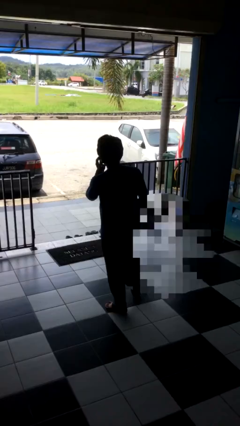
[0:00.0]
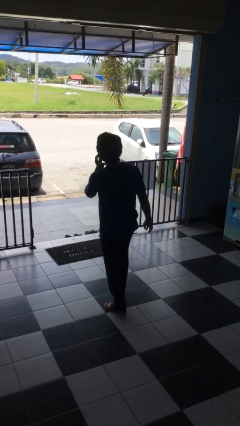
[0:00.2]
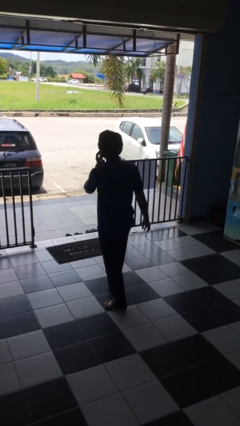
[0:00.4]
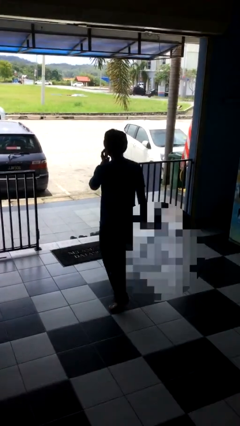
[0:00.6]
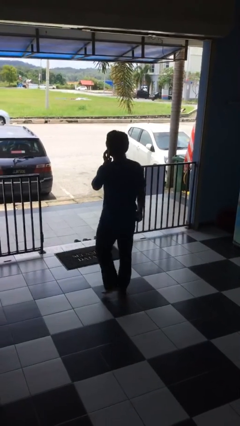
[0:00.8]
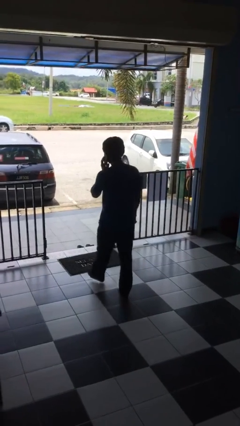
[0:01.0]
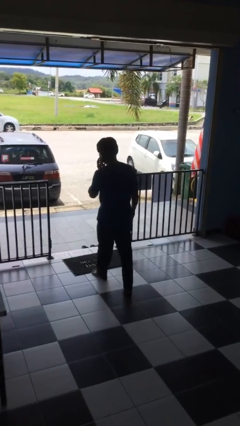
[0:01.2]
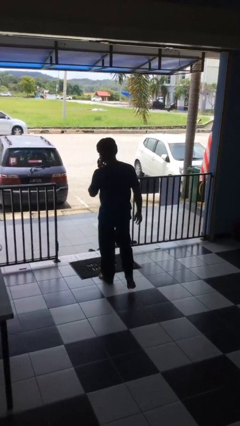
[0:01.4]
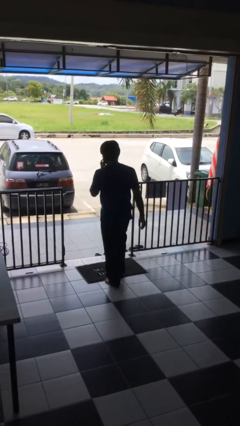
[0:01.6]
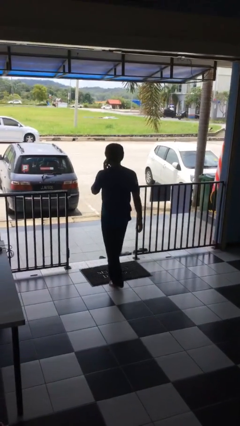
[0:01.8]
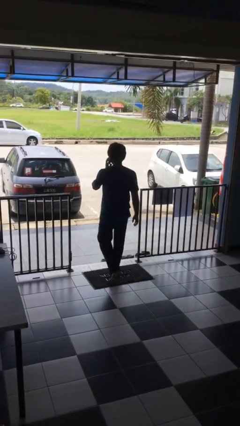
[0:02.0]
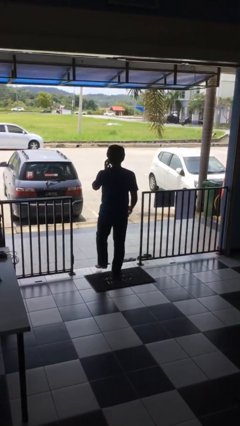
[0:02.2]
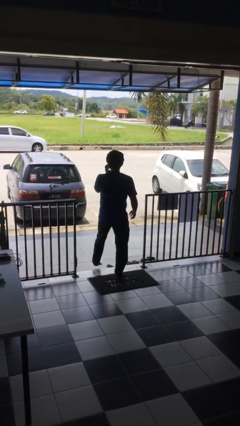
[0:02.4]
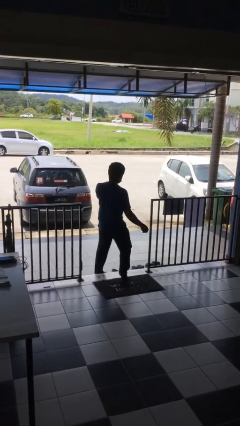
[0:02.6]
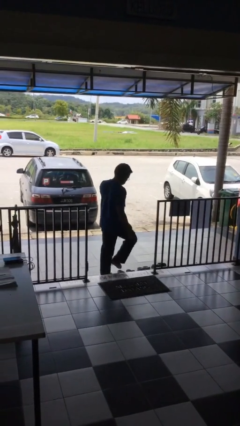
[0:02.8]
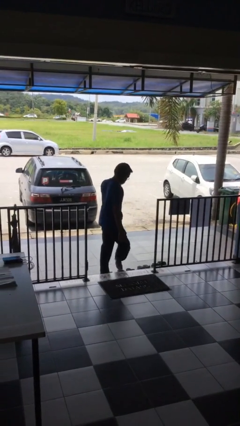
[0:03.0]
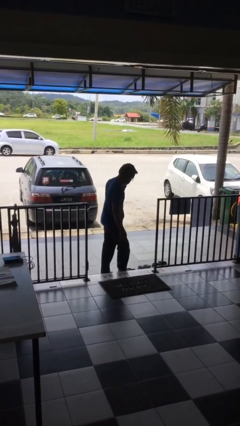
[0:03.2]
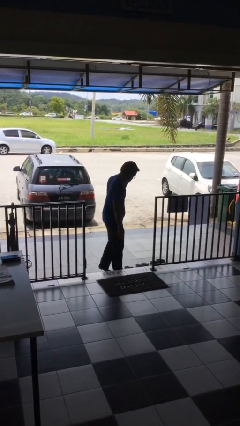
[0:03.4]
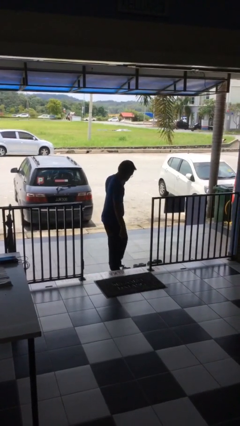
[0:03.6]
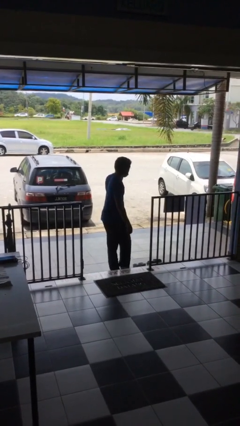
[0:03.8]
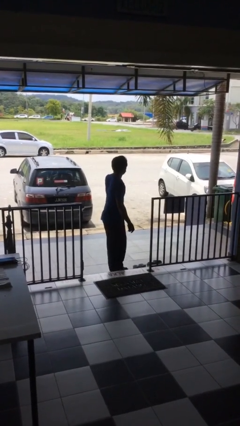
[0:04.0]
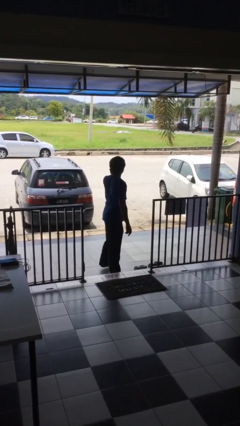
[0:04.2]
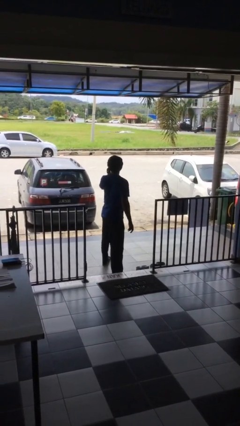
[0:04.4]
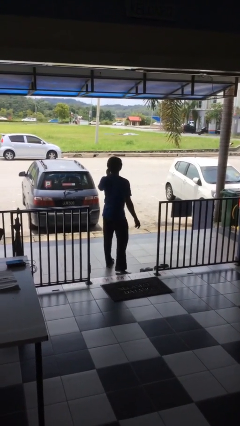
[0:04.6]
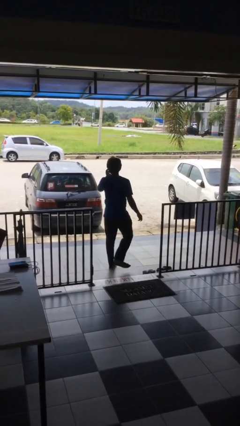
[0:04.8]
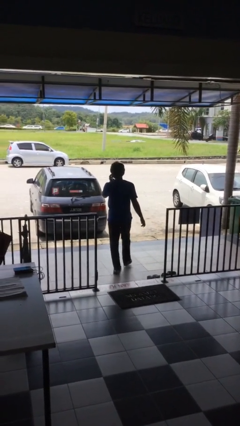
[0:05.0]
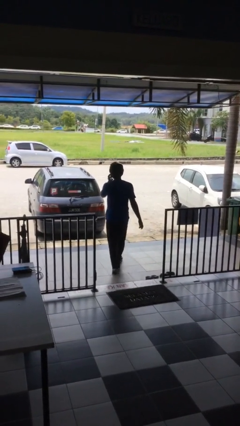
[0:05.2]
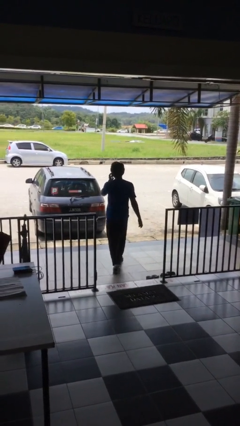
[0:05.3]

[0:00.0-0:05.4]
person exits scene through structure

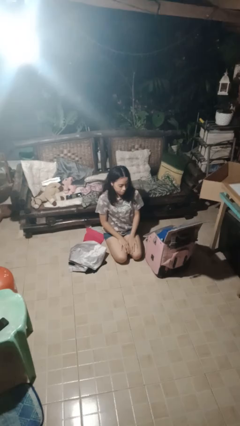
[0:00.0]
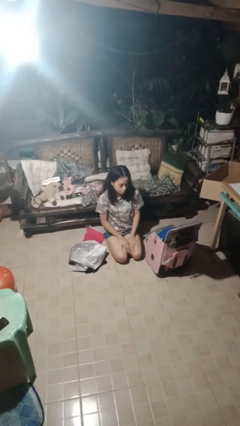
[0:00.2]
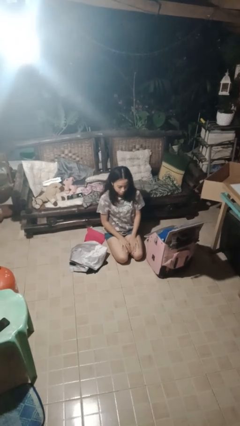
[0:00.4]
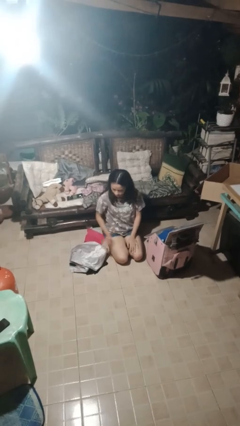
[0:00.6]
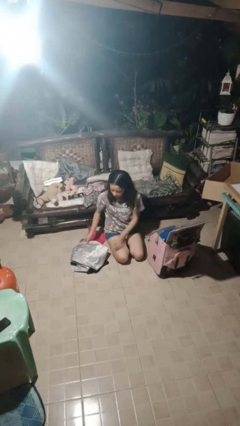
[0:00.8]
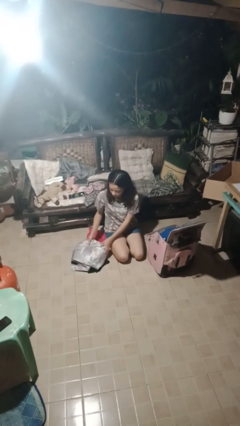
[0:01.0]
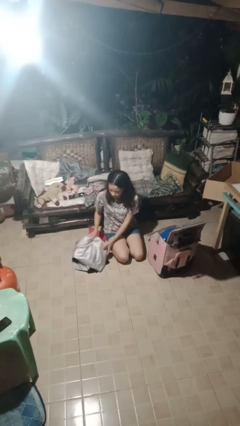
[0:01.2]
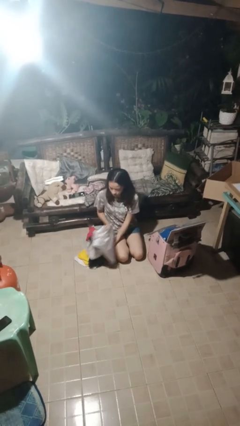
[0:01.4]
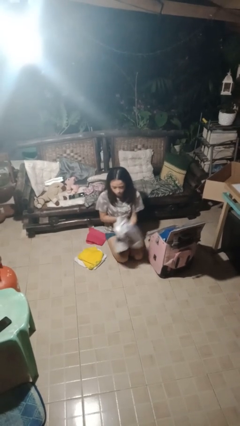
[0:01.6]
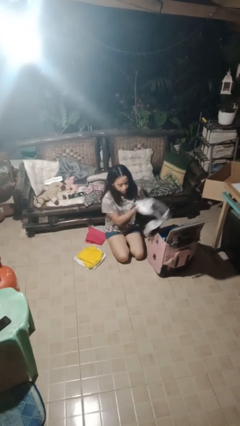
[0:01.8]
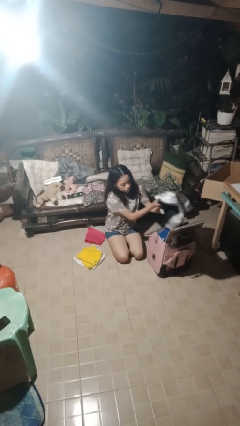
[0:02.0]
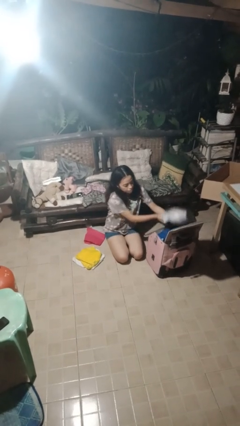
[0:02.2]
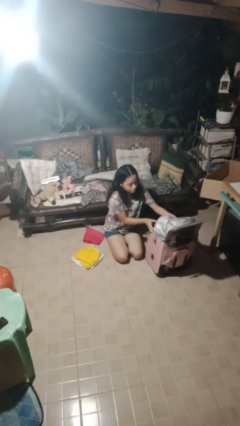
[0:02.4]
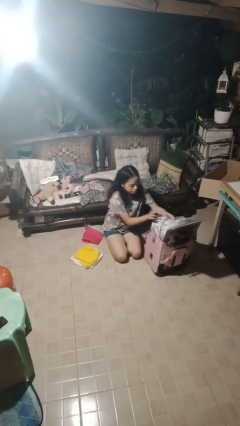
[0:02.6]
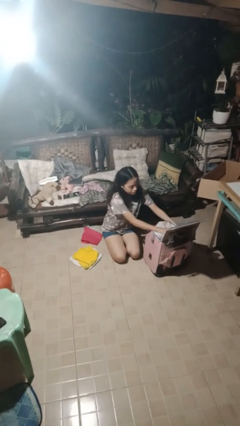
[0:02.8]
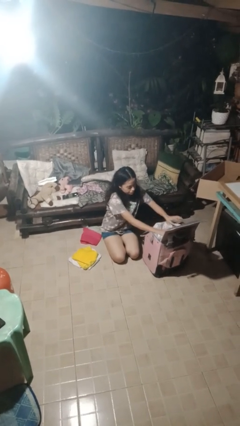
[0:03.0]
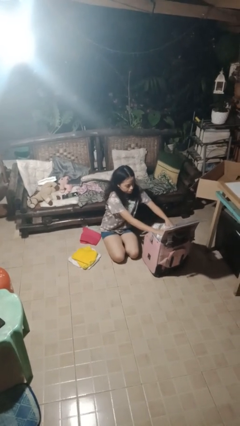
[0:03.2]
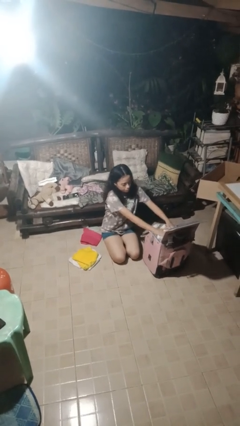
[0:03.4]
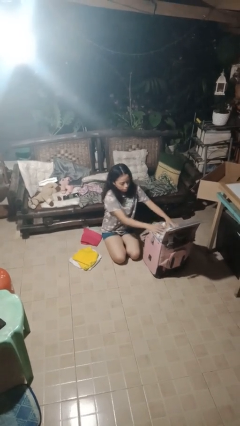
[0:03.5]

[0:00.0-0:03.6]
person loads clothes into suitcase

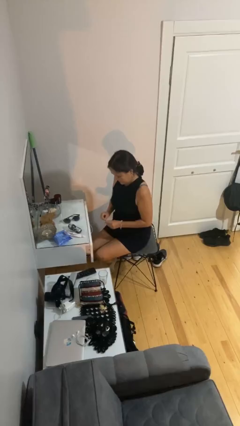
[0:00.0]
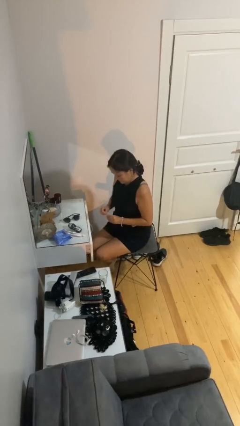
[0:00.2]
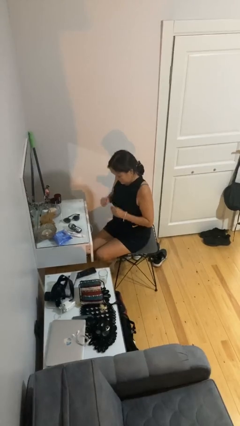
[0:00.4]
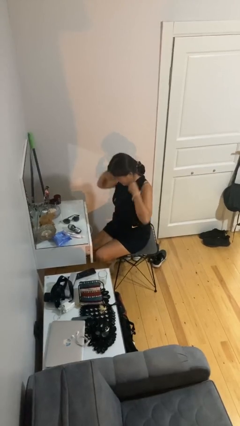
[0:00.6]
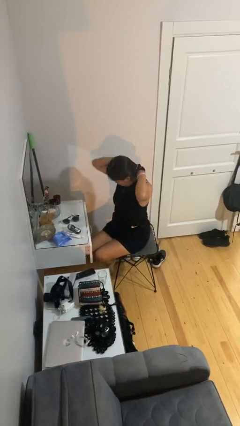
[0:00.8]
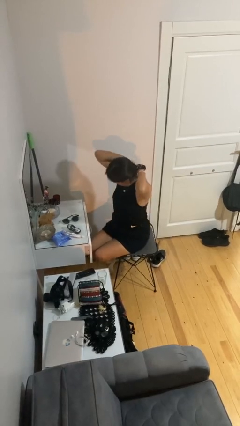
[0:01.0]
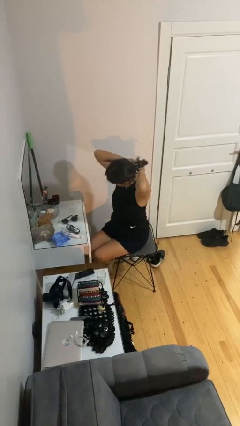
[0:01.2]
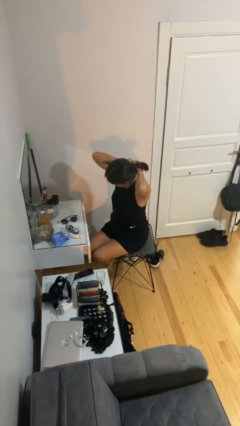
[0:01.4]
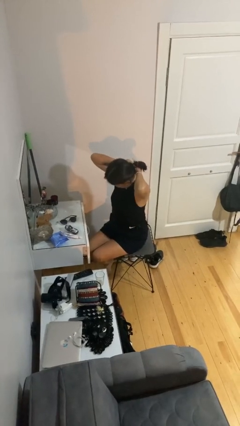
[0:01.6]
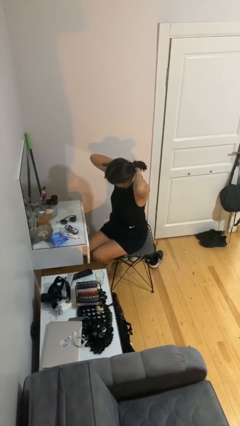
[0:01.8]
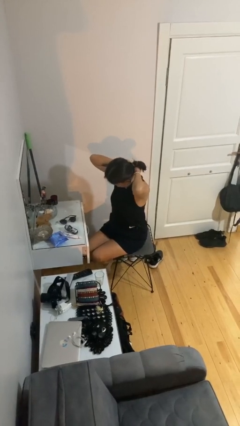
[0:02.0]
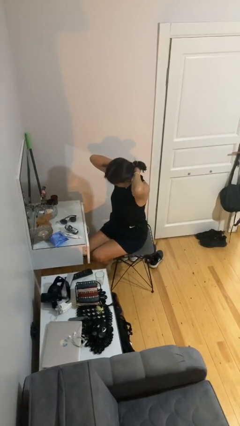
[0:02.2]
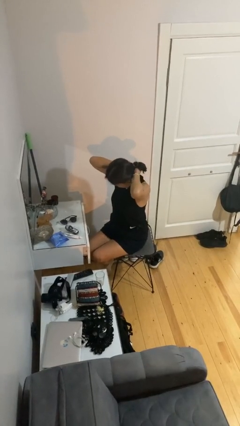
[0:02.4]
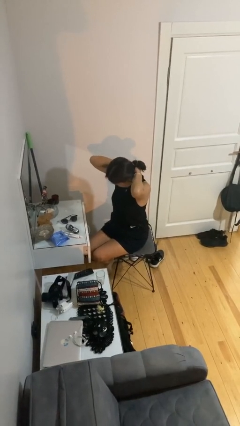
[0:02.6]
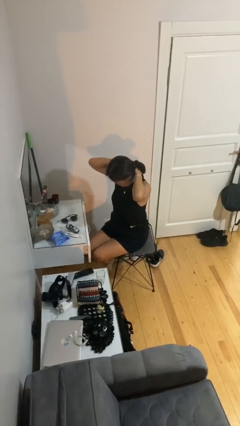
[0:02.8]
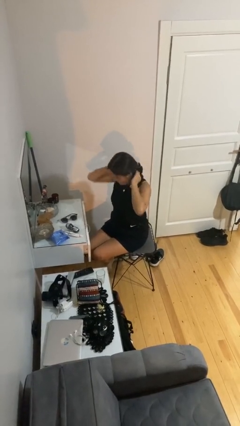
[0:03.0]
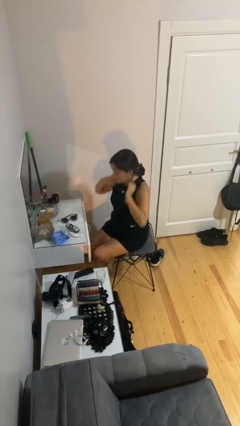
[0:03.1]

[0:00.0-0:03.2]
person puts on necklace

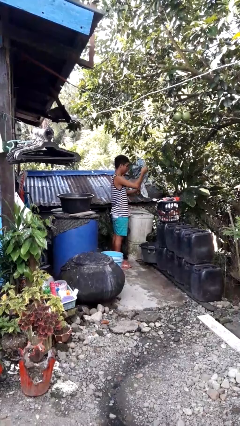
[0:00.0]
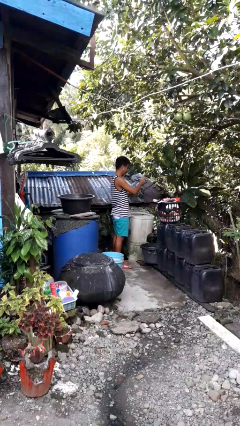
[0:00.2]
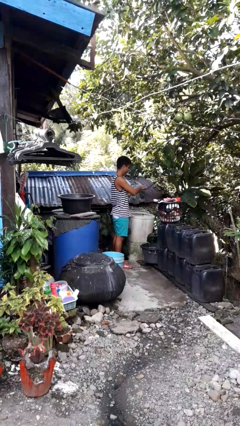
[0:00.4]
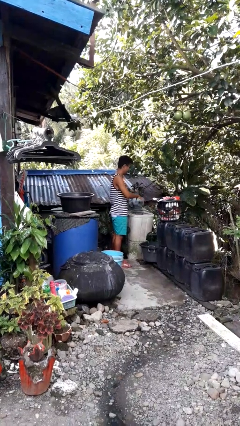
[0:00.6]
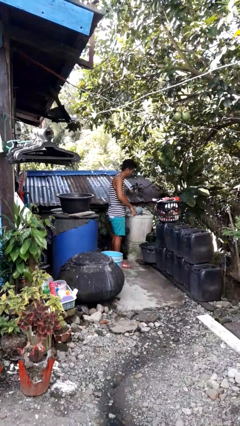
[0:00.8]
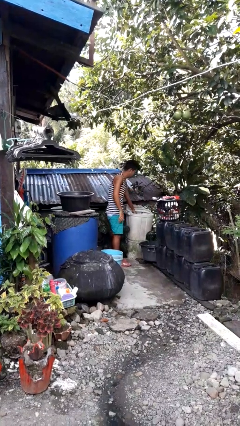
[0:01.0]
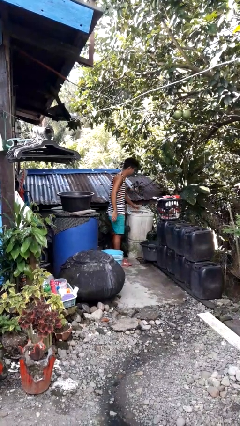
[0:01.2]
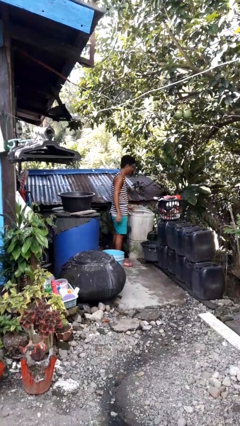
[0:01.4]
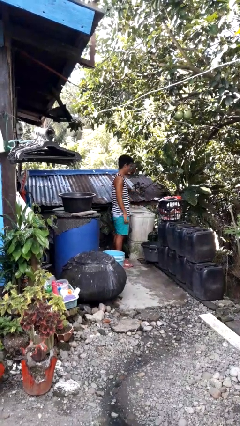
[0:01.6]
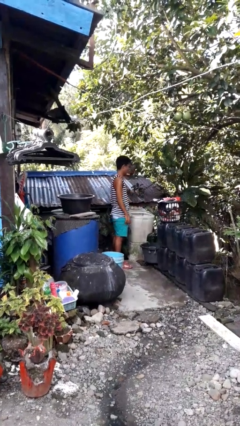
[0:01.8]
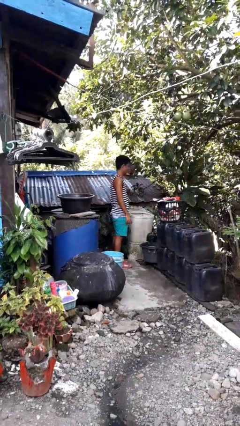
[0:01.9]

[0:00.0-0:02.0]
person loads clotheswasher

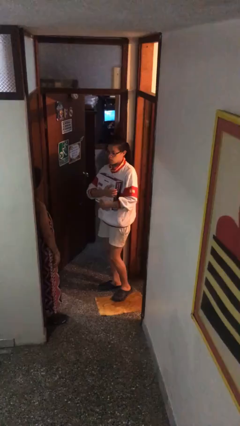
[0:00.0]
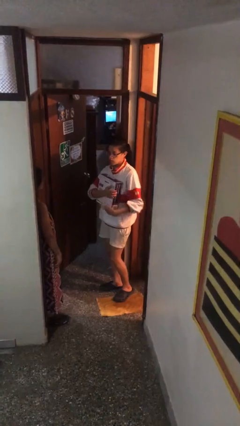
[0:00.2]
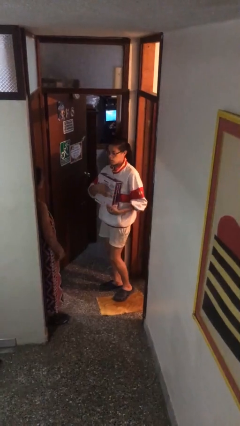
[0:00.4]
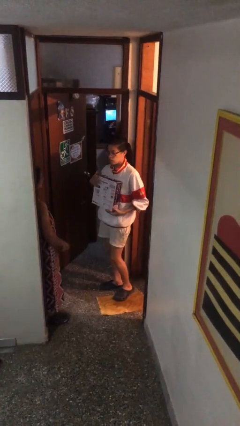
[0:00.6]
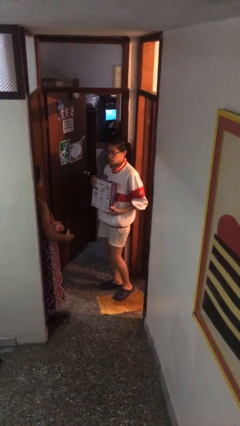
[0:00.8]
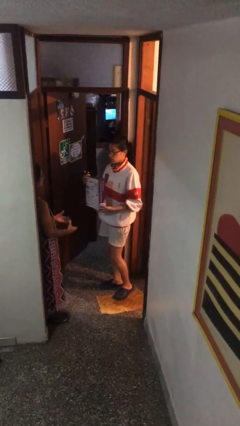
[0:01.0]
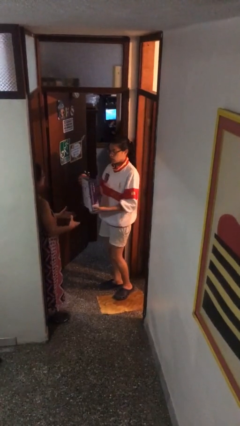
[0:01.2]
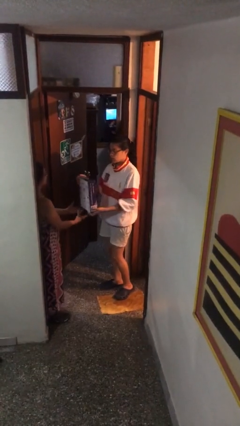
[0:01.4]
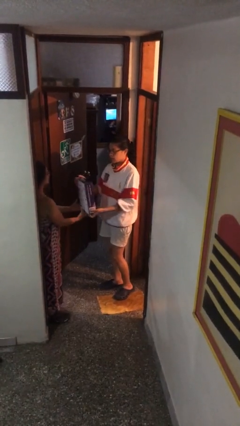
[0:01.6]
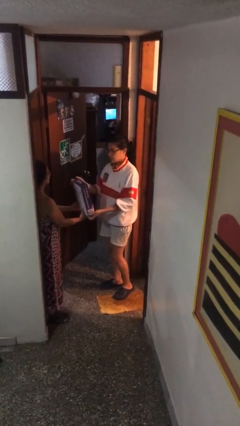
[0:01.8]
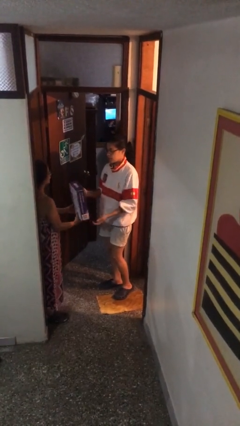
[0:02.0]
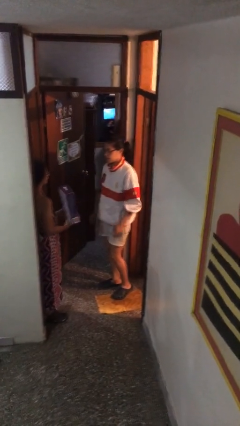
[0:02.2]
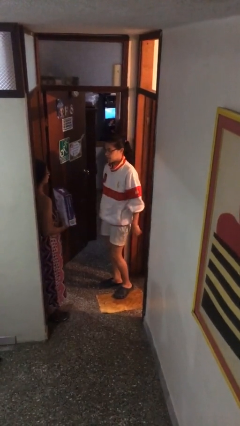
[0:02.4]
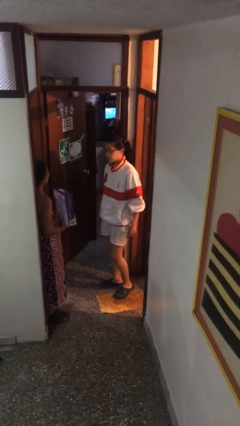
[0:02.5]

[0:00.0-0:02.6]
person transfers object to person

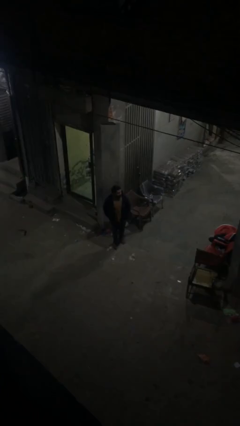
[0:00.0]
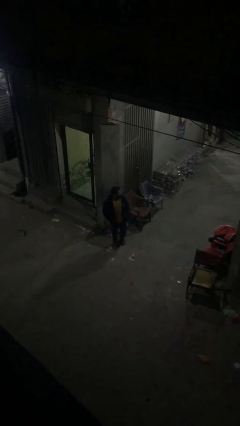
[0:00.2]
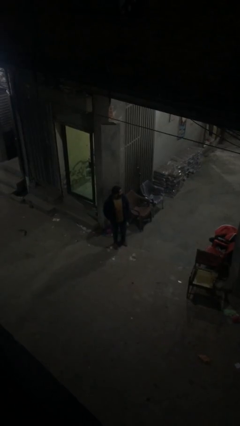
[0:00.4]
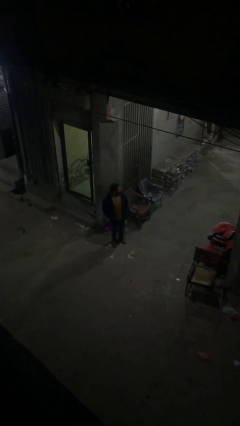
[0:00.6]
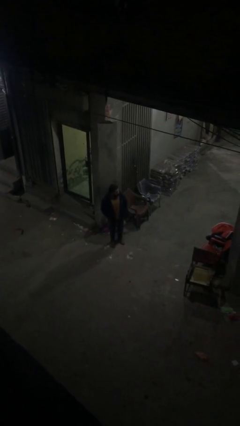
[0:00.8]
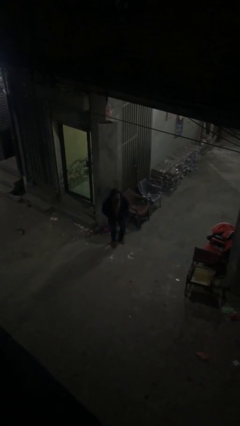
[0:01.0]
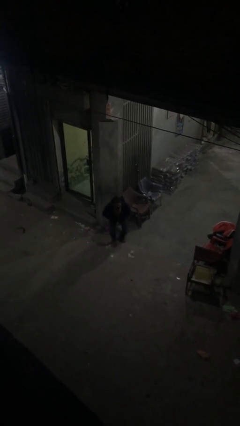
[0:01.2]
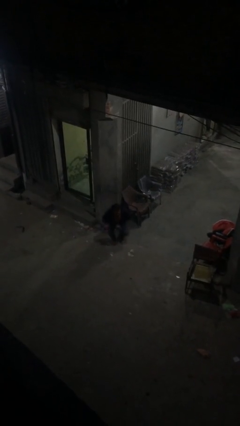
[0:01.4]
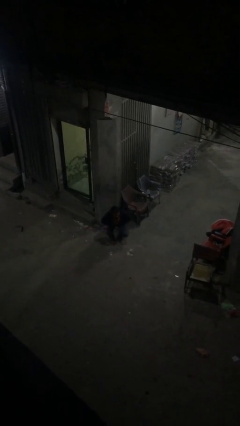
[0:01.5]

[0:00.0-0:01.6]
person sits down
